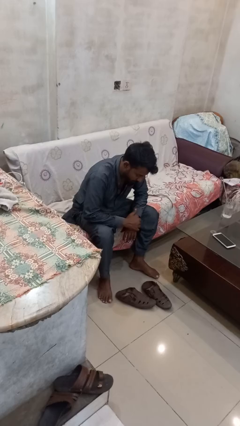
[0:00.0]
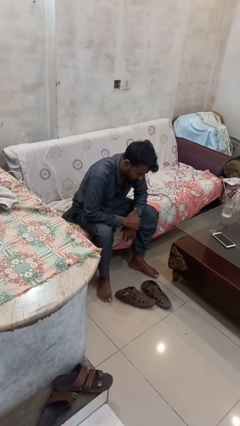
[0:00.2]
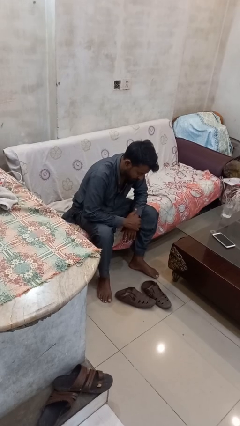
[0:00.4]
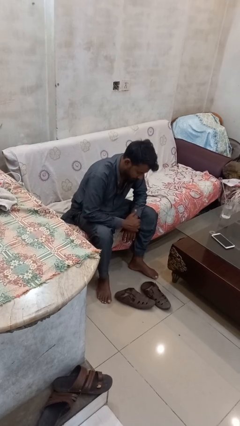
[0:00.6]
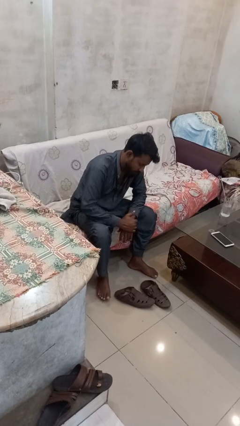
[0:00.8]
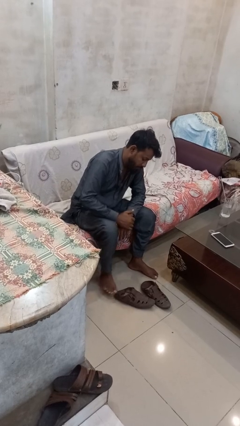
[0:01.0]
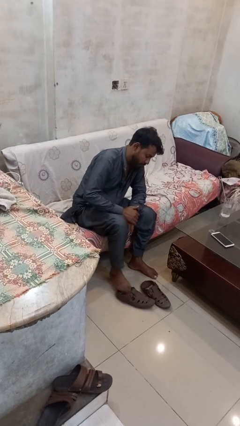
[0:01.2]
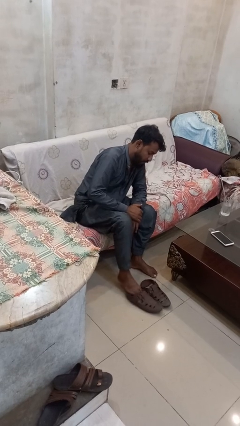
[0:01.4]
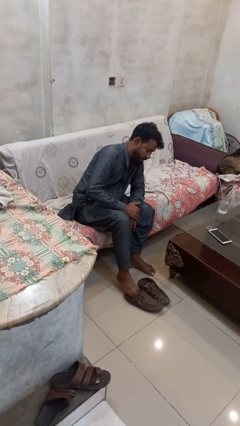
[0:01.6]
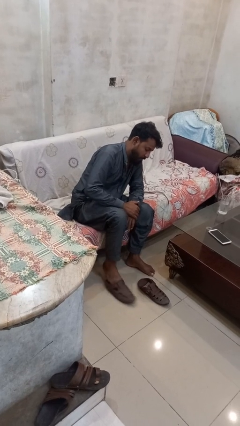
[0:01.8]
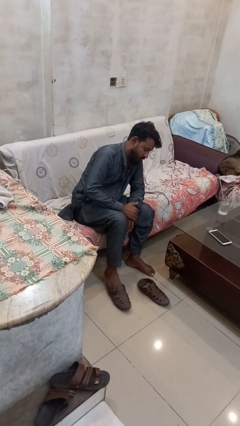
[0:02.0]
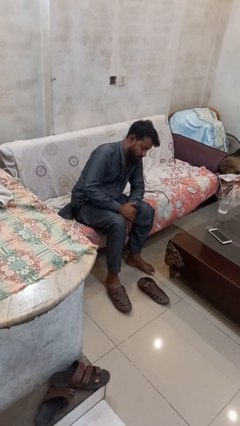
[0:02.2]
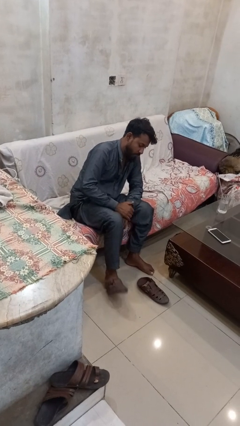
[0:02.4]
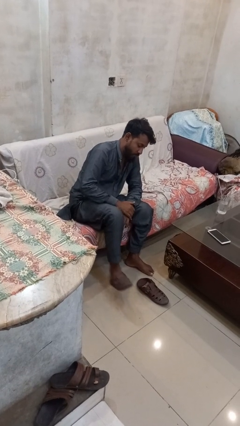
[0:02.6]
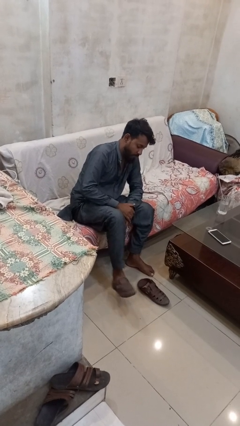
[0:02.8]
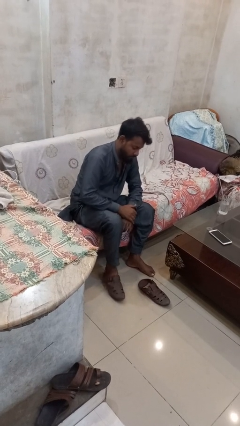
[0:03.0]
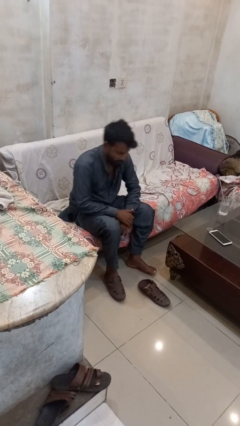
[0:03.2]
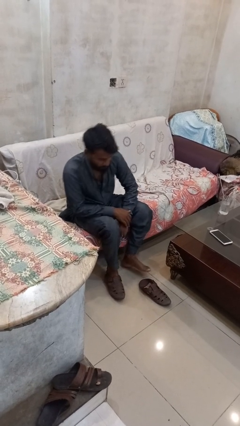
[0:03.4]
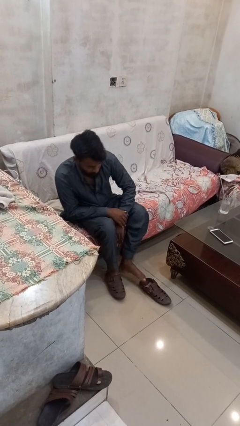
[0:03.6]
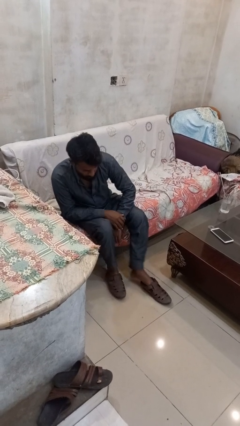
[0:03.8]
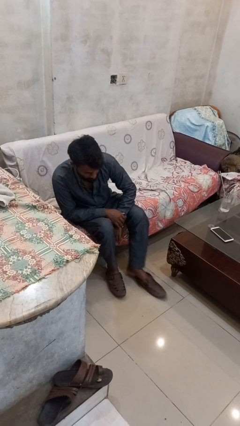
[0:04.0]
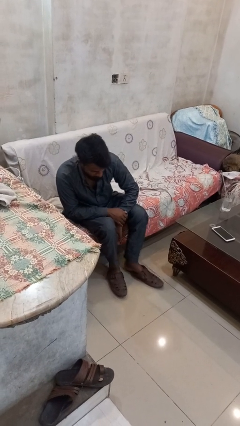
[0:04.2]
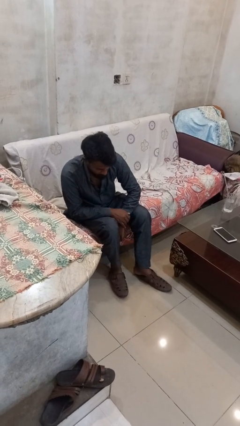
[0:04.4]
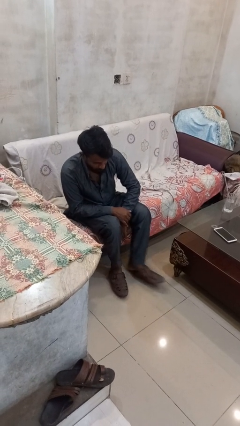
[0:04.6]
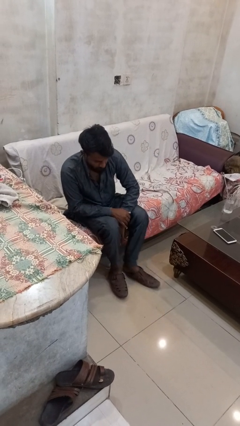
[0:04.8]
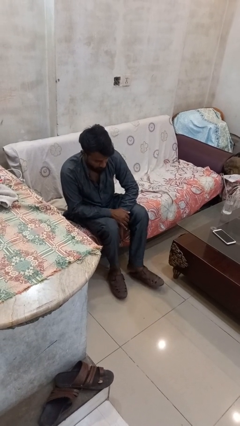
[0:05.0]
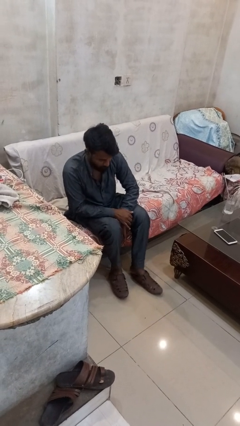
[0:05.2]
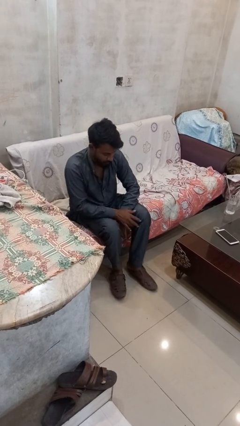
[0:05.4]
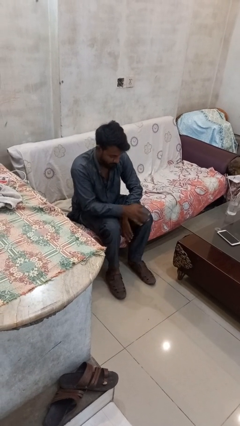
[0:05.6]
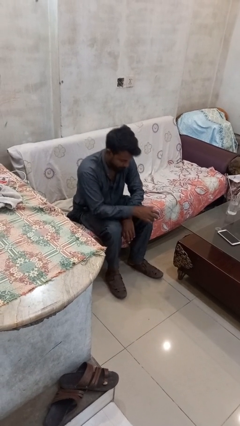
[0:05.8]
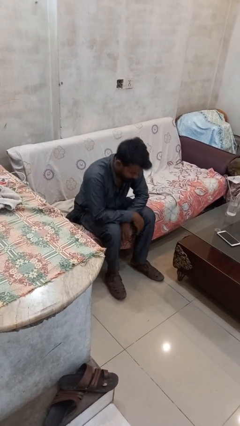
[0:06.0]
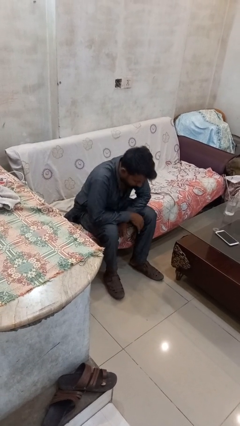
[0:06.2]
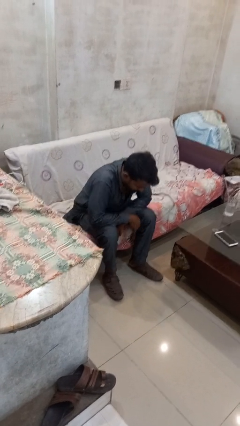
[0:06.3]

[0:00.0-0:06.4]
person puts on shoes

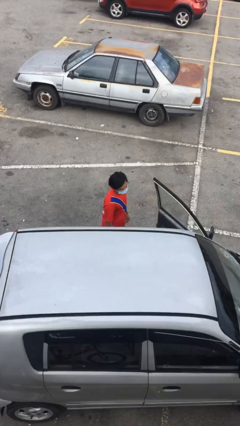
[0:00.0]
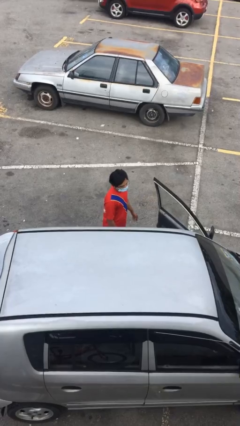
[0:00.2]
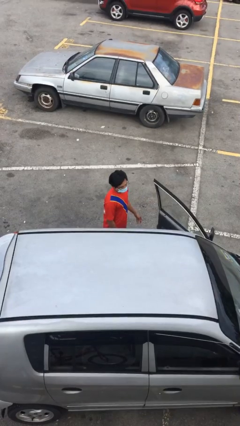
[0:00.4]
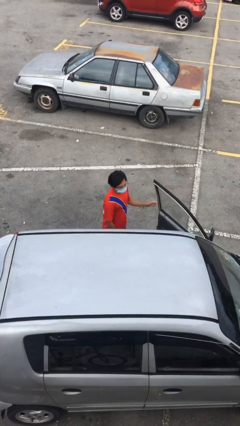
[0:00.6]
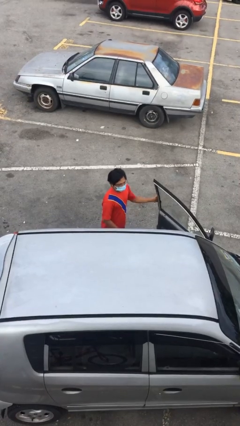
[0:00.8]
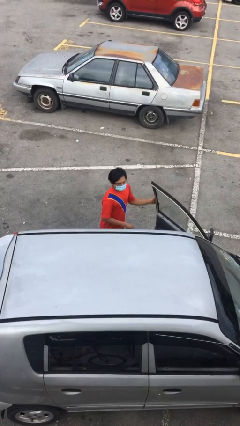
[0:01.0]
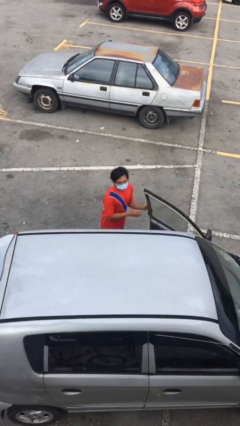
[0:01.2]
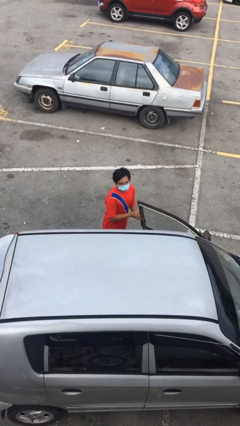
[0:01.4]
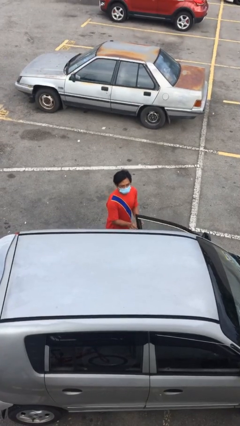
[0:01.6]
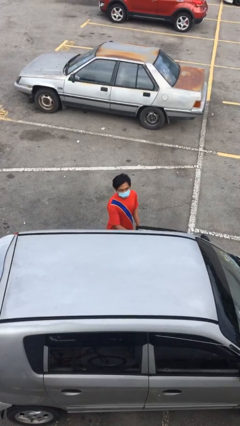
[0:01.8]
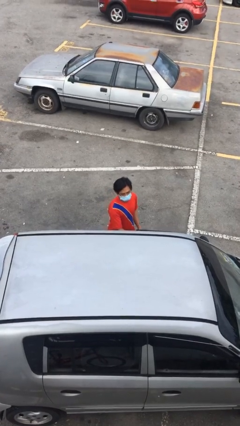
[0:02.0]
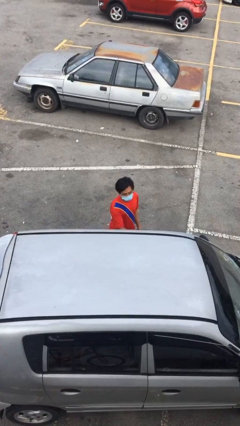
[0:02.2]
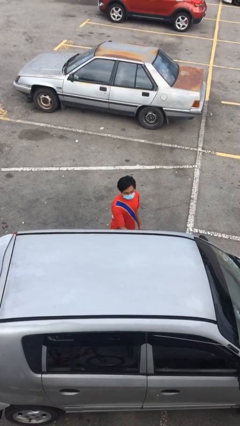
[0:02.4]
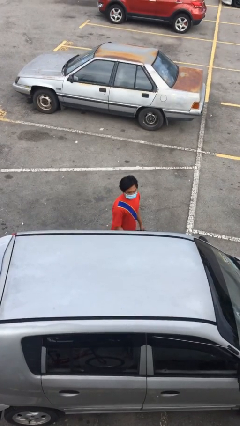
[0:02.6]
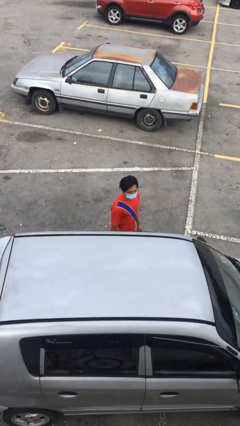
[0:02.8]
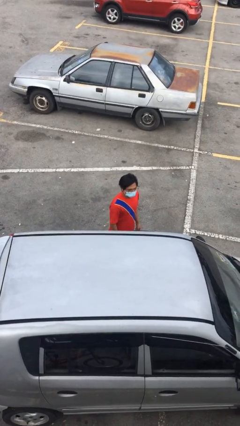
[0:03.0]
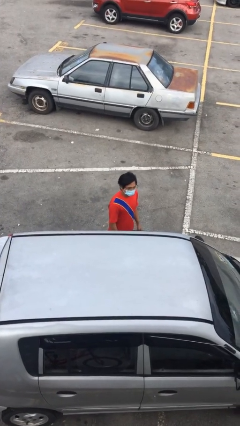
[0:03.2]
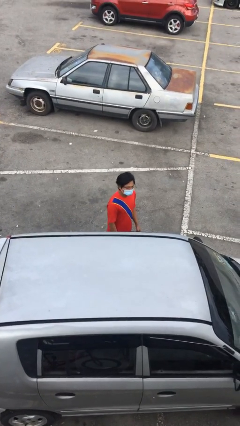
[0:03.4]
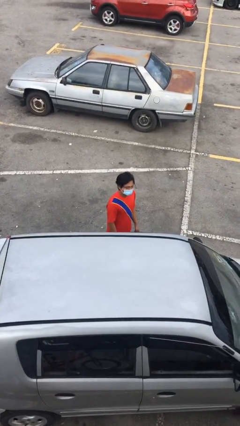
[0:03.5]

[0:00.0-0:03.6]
person closes car door

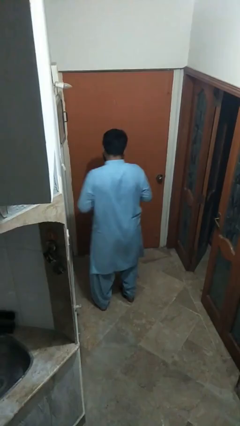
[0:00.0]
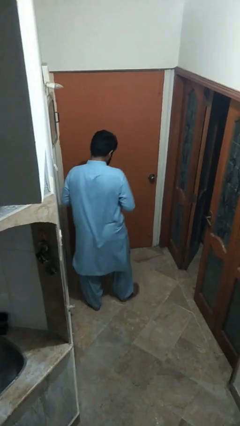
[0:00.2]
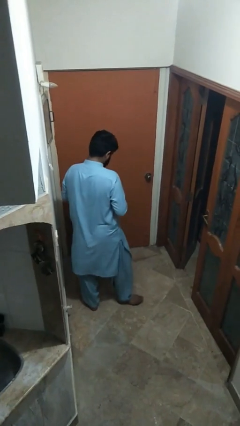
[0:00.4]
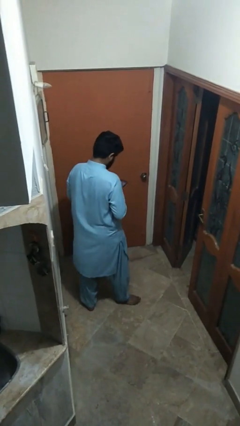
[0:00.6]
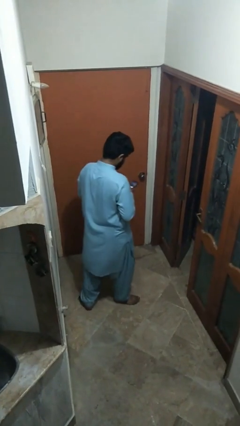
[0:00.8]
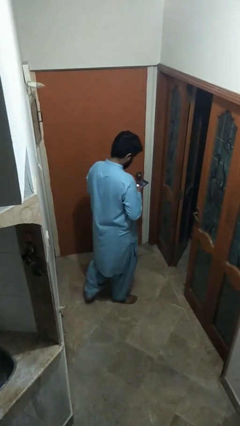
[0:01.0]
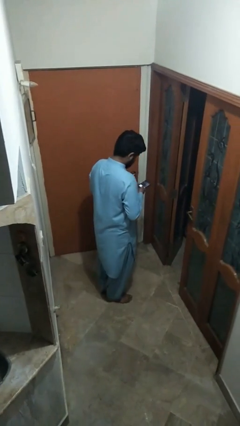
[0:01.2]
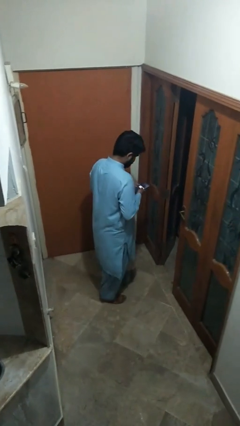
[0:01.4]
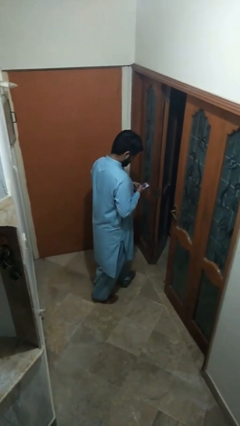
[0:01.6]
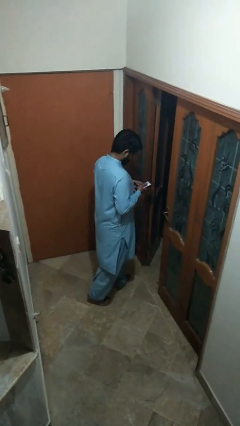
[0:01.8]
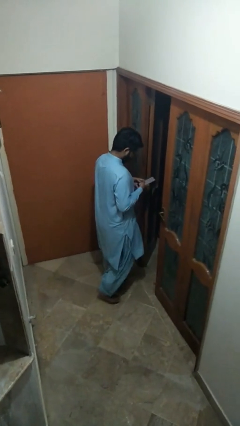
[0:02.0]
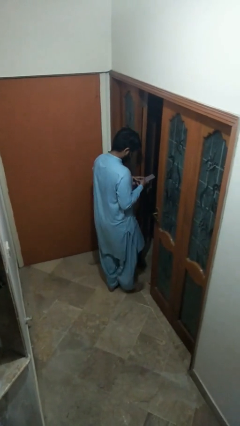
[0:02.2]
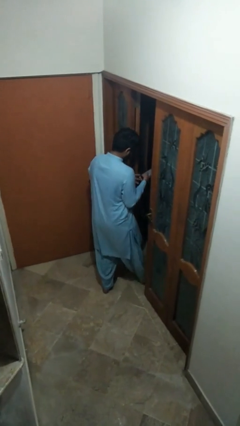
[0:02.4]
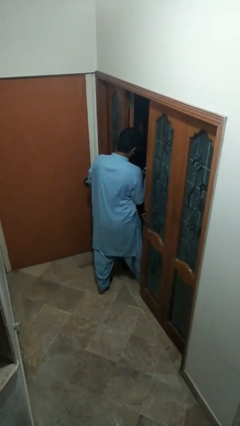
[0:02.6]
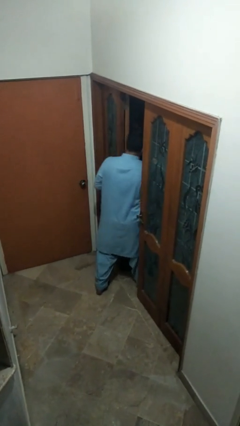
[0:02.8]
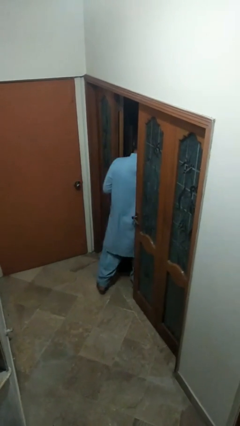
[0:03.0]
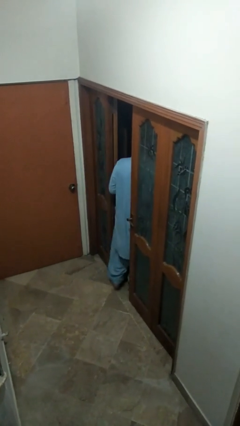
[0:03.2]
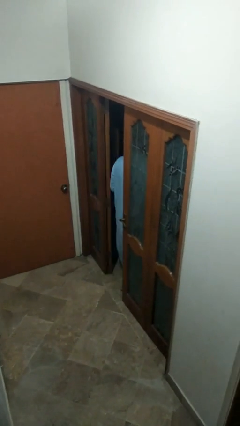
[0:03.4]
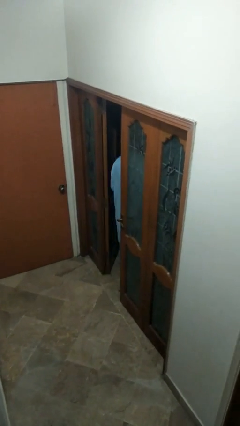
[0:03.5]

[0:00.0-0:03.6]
person exits scene through structure

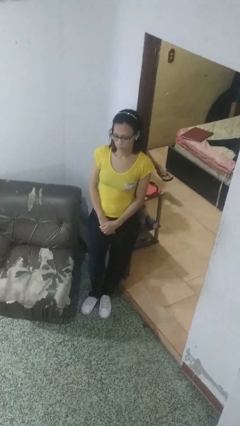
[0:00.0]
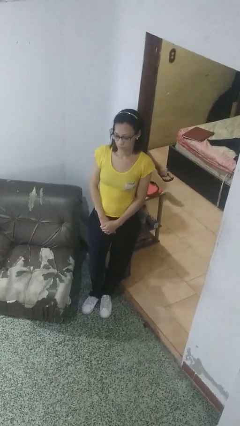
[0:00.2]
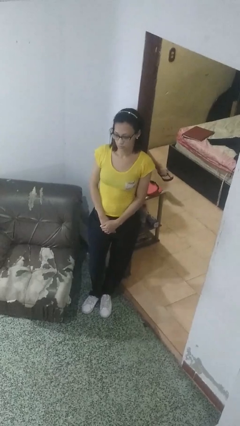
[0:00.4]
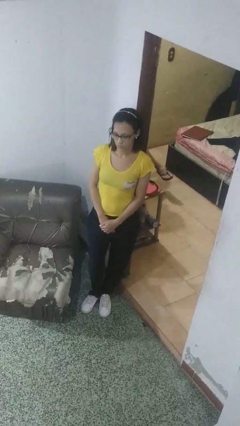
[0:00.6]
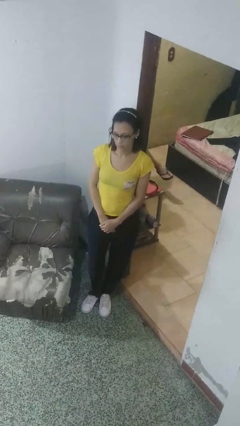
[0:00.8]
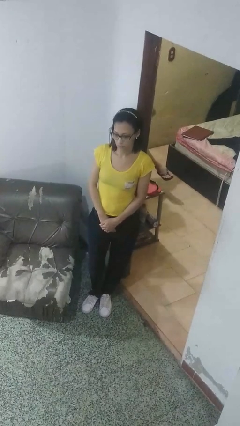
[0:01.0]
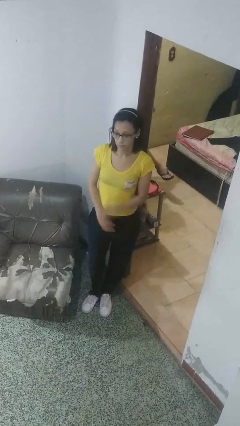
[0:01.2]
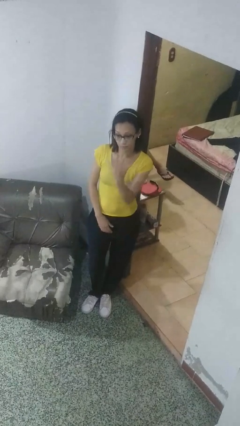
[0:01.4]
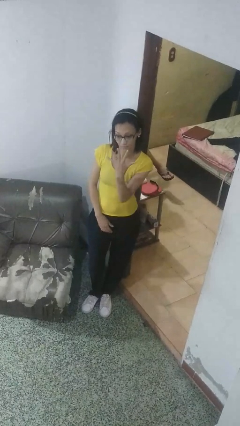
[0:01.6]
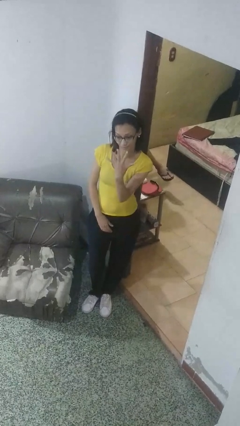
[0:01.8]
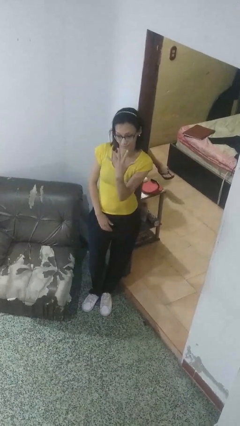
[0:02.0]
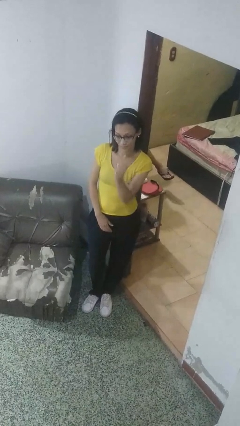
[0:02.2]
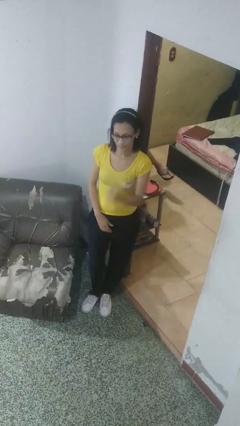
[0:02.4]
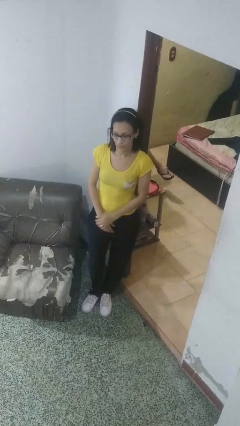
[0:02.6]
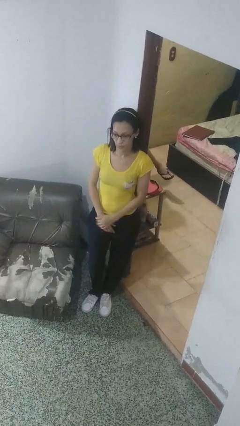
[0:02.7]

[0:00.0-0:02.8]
person gestures number five

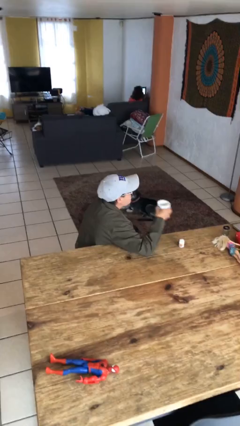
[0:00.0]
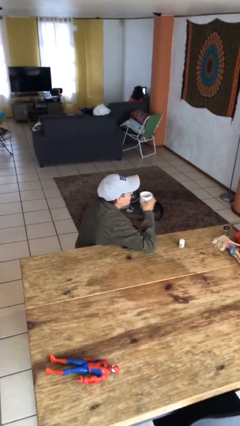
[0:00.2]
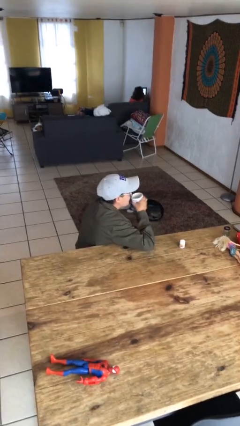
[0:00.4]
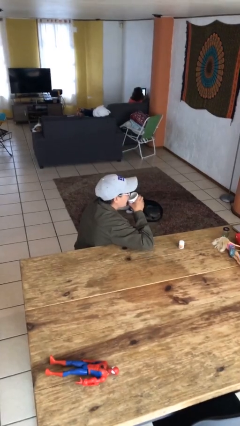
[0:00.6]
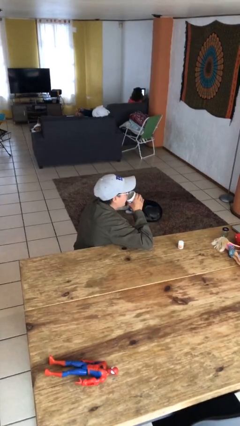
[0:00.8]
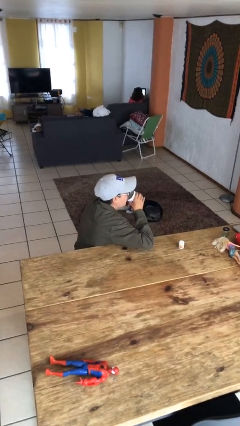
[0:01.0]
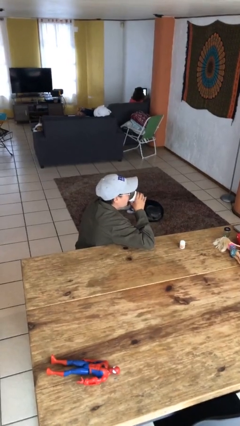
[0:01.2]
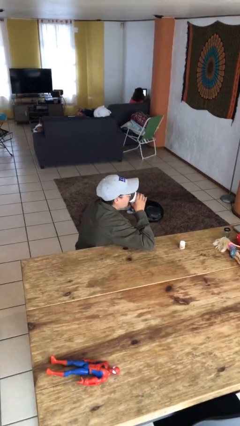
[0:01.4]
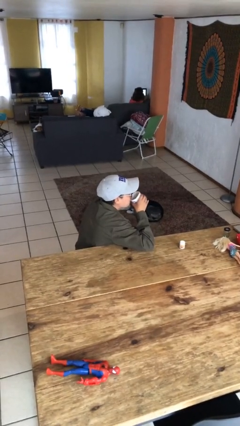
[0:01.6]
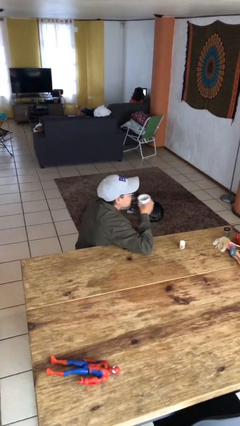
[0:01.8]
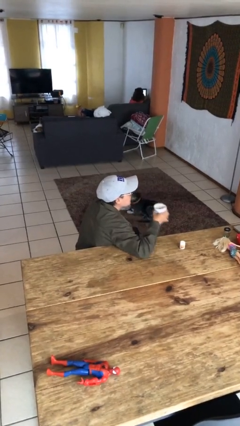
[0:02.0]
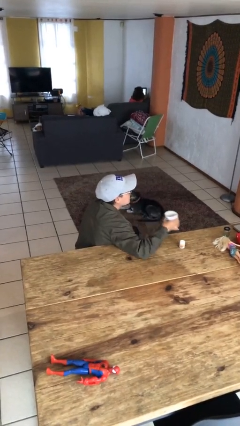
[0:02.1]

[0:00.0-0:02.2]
person drinks from cup
